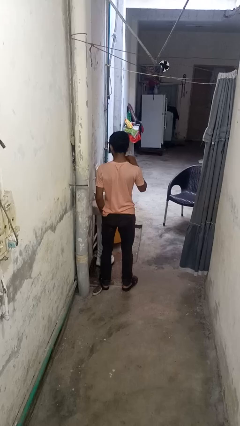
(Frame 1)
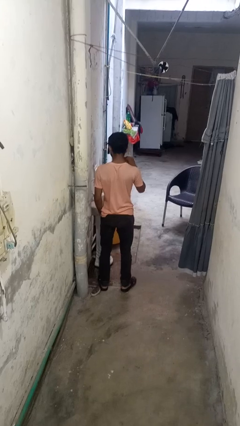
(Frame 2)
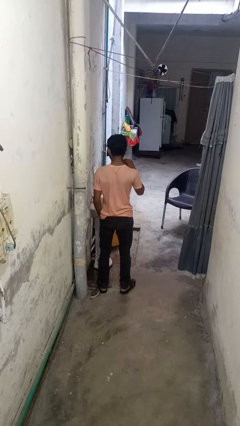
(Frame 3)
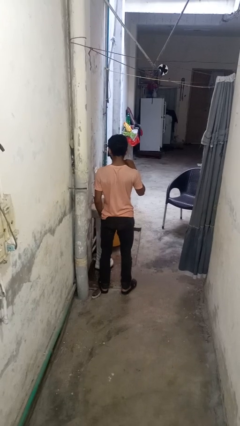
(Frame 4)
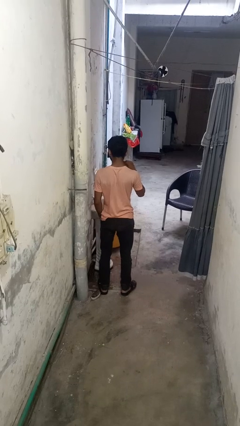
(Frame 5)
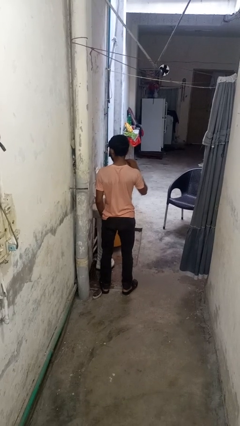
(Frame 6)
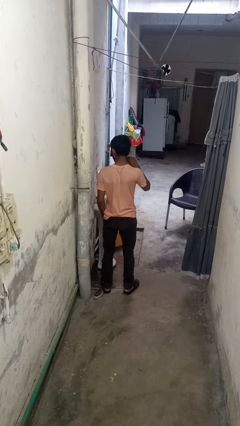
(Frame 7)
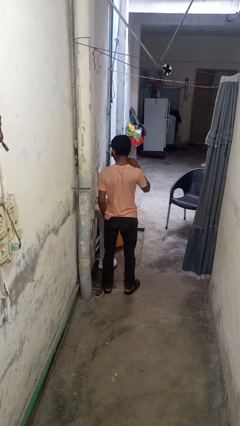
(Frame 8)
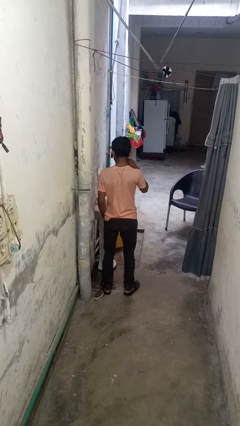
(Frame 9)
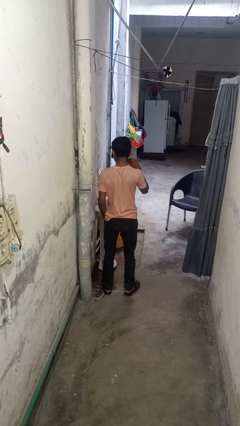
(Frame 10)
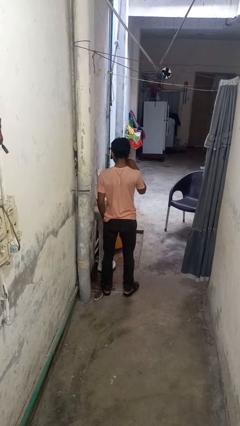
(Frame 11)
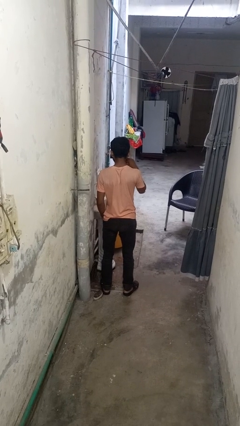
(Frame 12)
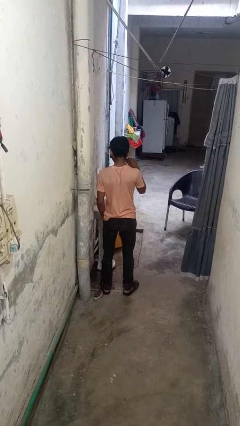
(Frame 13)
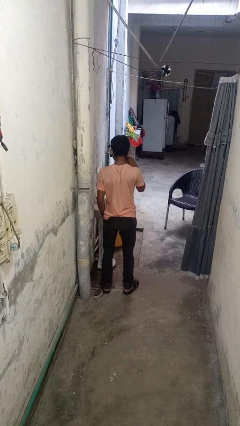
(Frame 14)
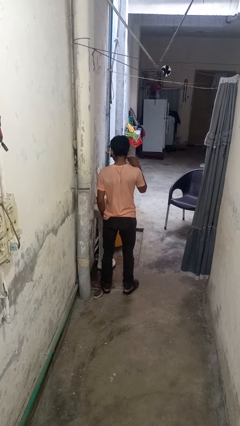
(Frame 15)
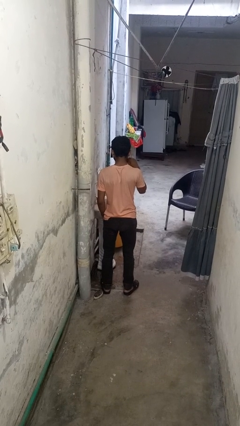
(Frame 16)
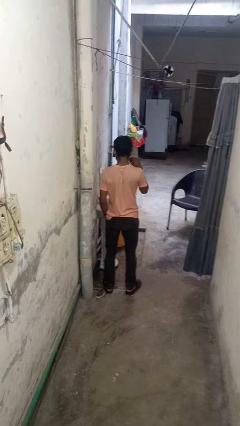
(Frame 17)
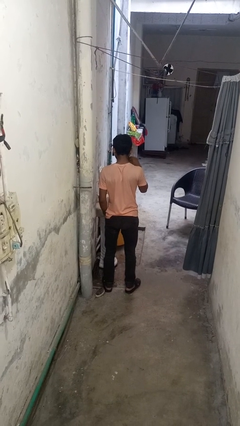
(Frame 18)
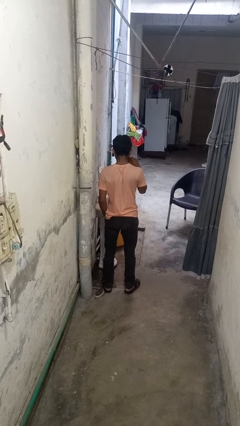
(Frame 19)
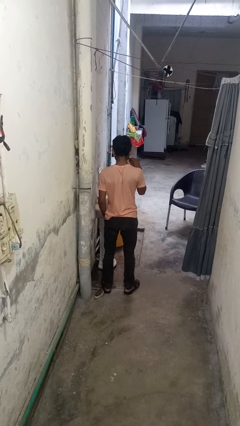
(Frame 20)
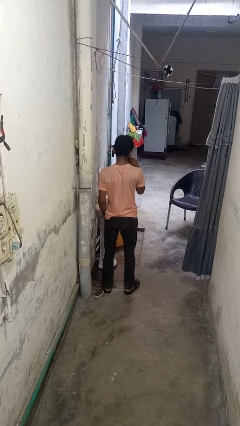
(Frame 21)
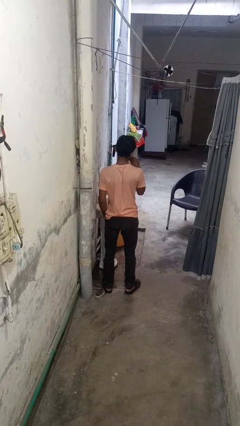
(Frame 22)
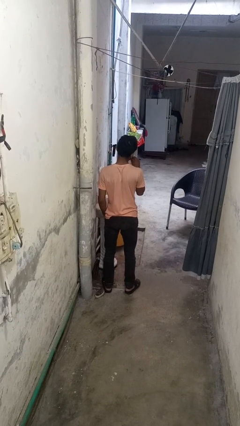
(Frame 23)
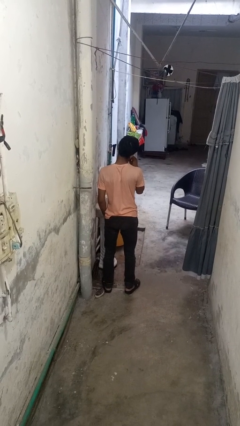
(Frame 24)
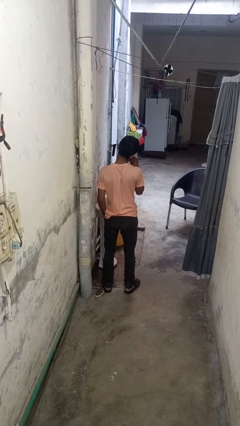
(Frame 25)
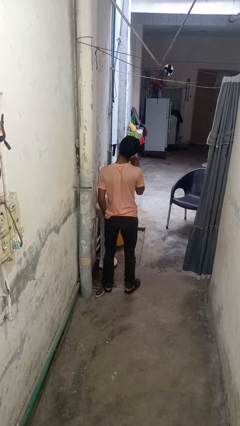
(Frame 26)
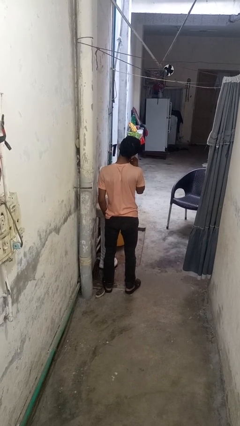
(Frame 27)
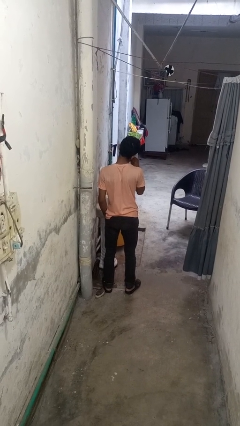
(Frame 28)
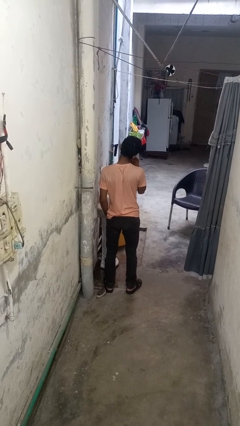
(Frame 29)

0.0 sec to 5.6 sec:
person brushes teeth

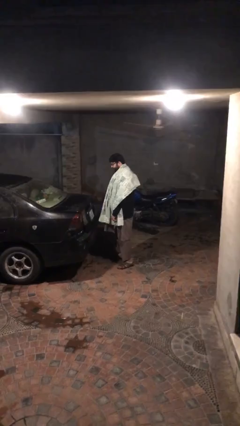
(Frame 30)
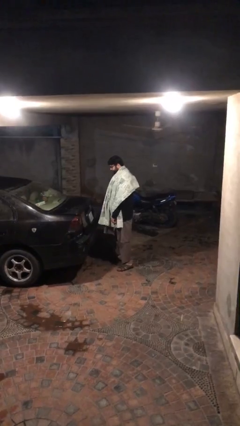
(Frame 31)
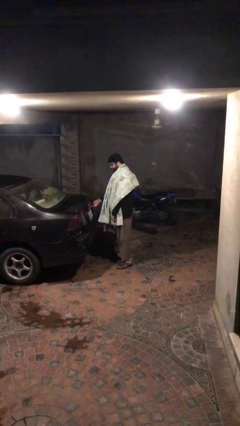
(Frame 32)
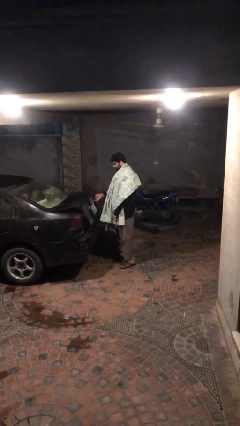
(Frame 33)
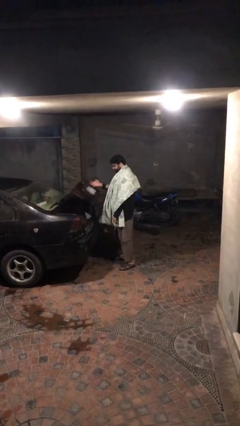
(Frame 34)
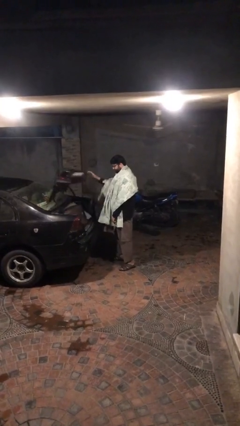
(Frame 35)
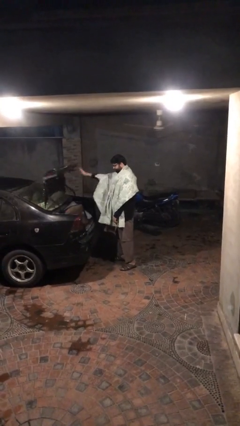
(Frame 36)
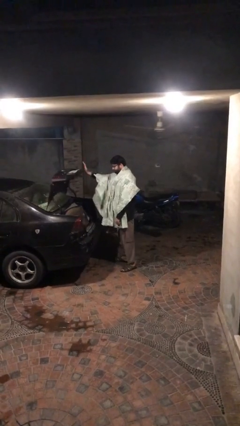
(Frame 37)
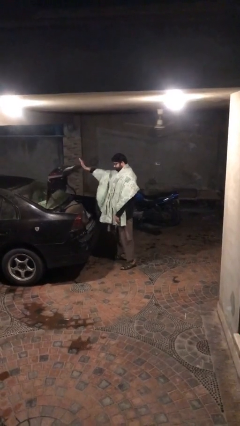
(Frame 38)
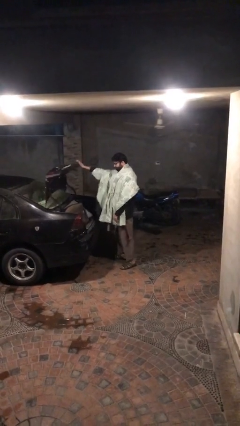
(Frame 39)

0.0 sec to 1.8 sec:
person opens car trunk

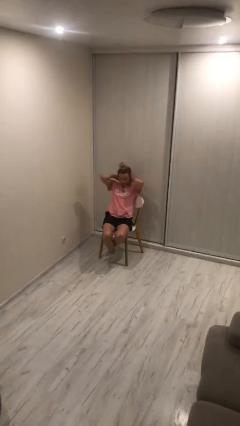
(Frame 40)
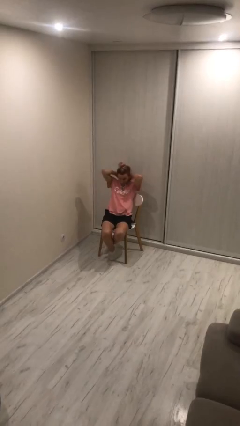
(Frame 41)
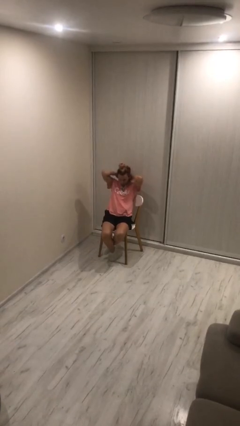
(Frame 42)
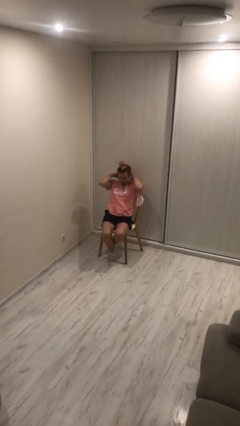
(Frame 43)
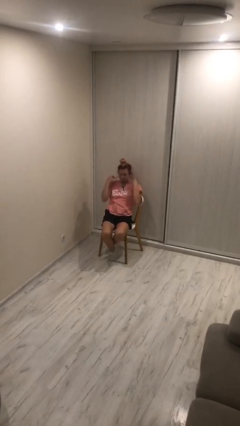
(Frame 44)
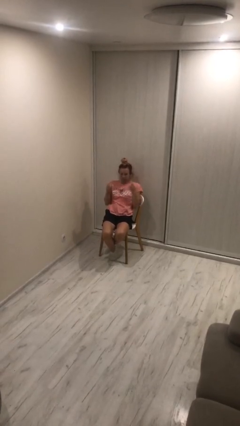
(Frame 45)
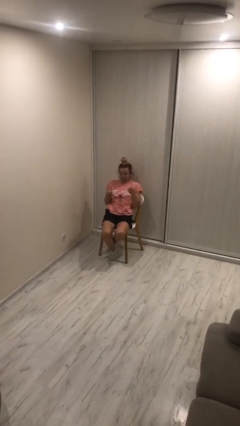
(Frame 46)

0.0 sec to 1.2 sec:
person takes off necklace

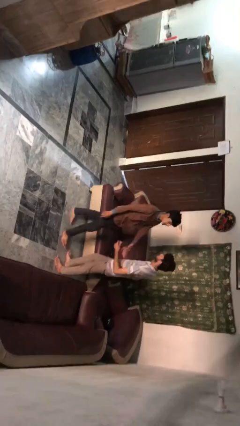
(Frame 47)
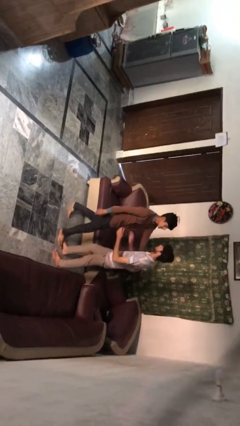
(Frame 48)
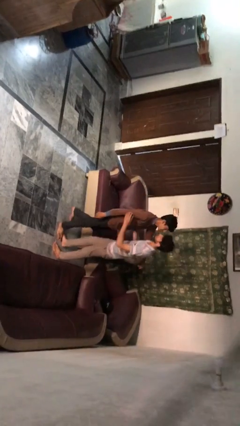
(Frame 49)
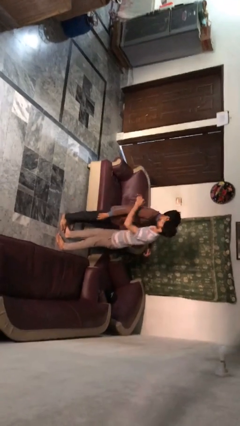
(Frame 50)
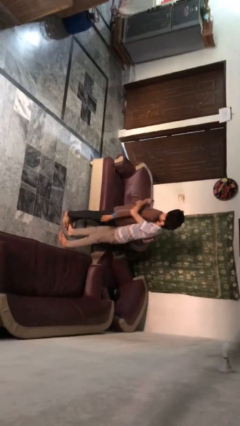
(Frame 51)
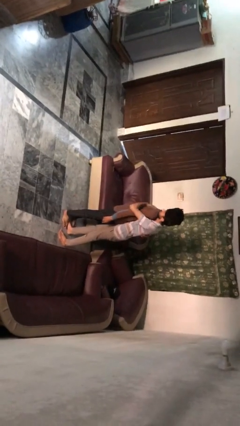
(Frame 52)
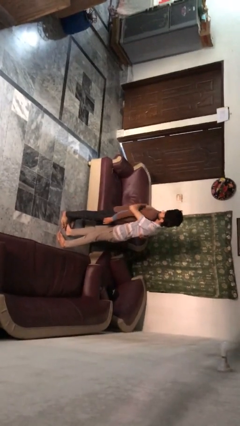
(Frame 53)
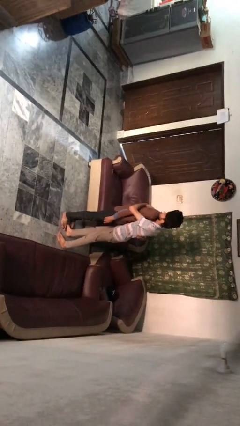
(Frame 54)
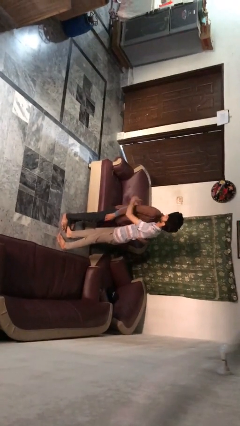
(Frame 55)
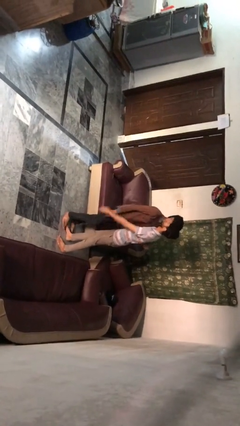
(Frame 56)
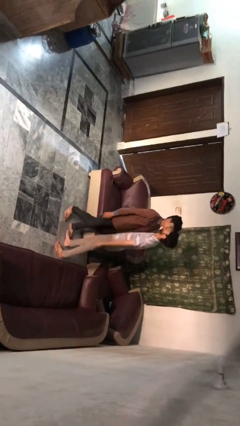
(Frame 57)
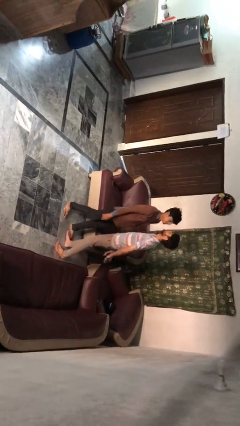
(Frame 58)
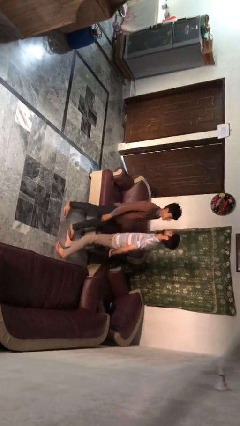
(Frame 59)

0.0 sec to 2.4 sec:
person embraces person

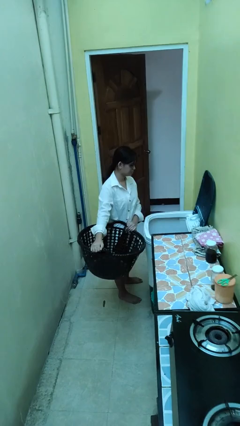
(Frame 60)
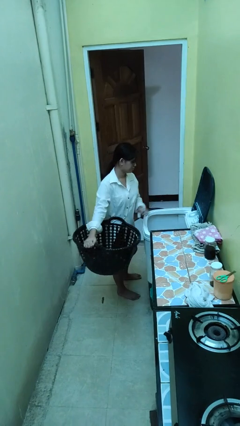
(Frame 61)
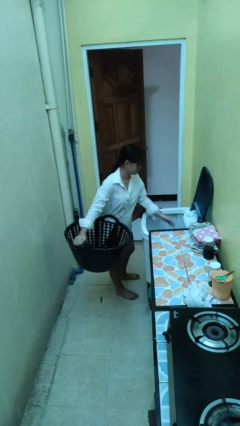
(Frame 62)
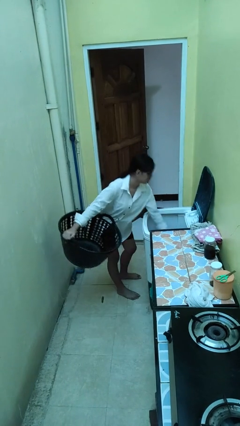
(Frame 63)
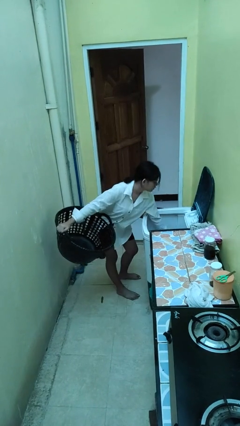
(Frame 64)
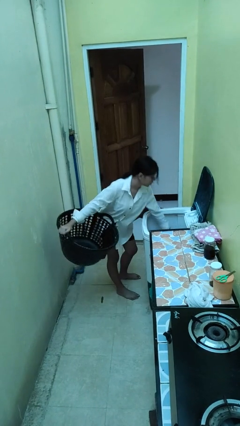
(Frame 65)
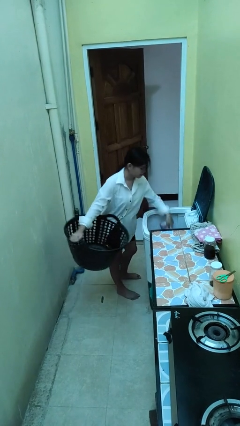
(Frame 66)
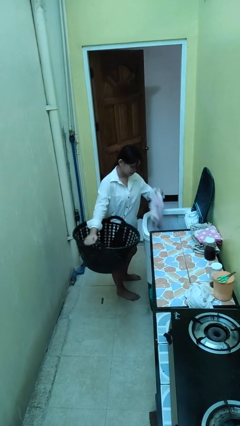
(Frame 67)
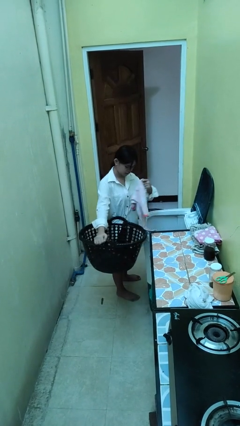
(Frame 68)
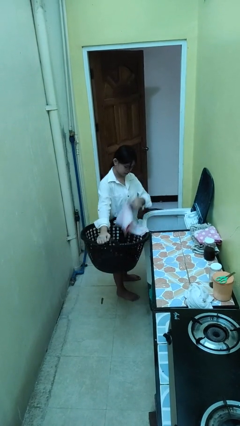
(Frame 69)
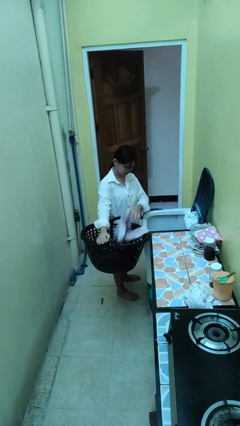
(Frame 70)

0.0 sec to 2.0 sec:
person loads clotheswasher

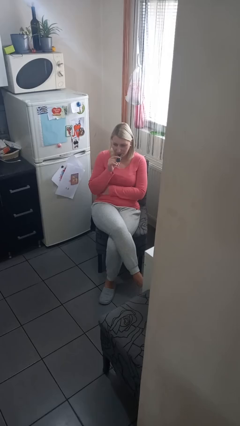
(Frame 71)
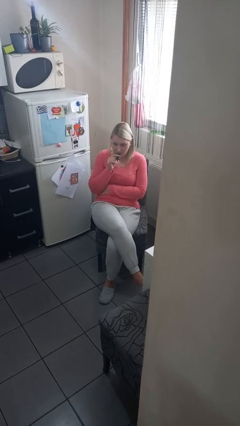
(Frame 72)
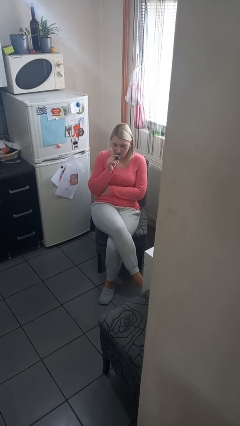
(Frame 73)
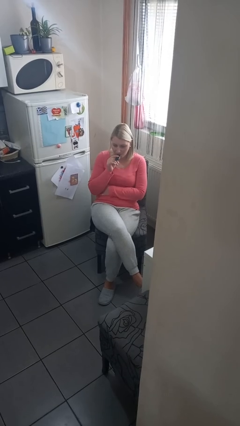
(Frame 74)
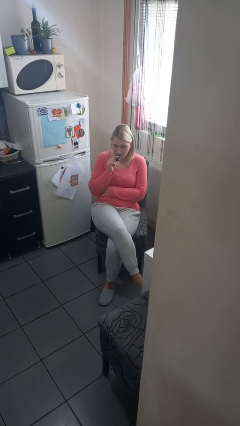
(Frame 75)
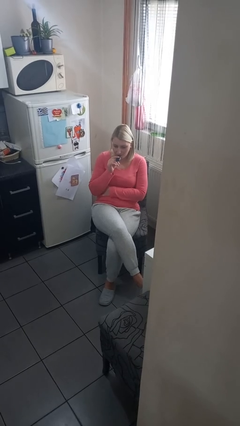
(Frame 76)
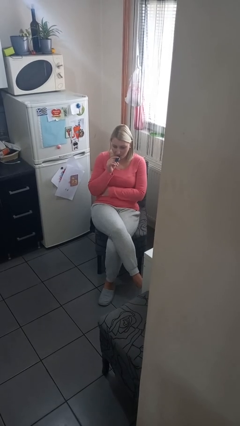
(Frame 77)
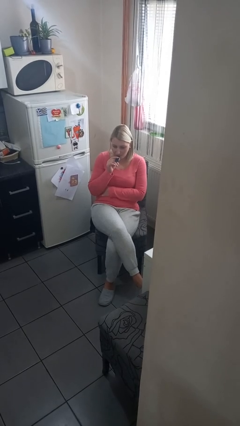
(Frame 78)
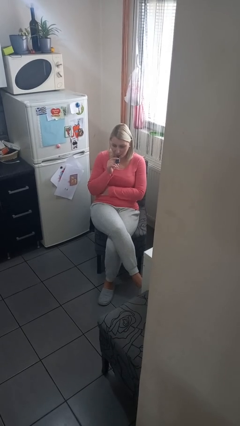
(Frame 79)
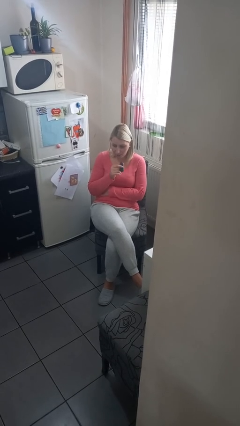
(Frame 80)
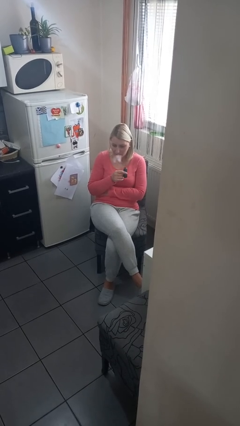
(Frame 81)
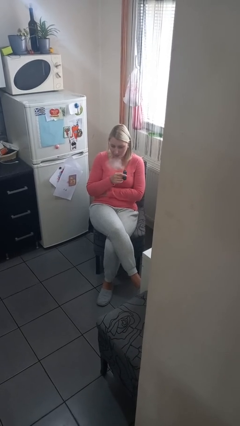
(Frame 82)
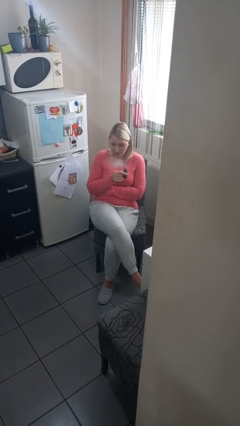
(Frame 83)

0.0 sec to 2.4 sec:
person vapes

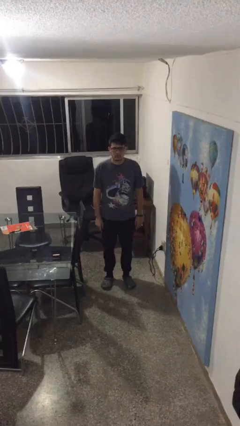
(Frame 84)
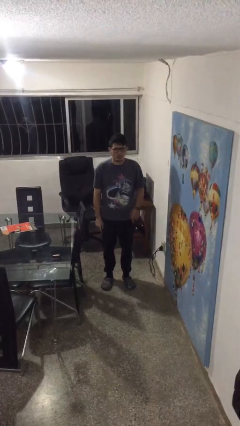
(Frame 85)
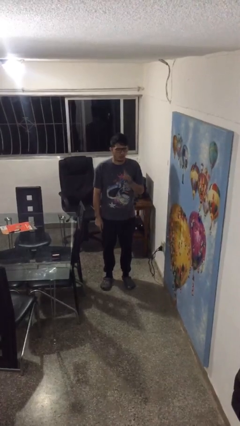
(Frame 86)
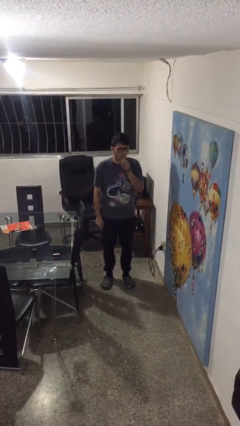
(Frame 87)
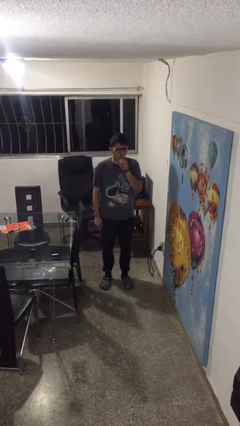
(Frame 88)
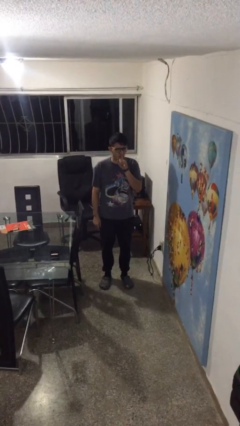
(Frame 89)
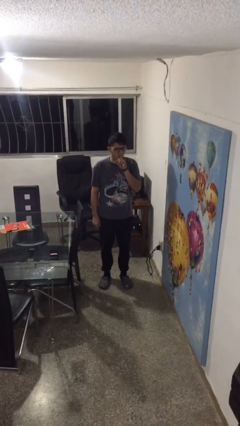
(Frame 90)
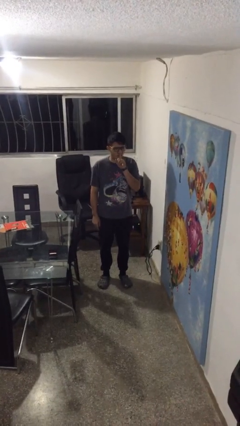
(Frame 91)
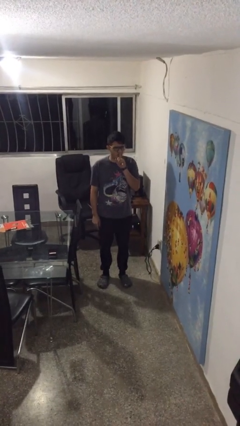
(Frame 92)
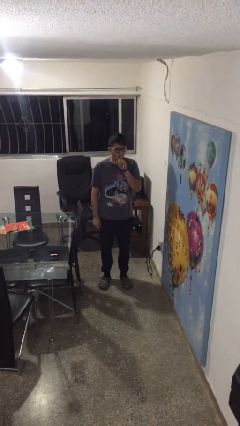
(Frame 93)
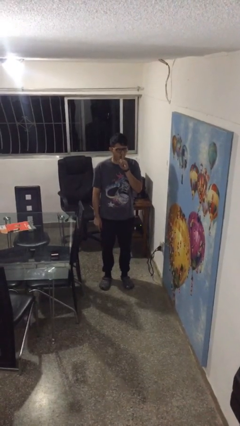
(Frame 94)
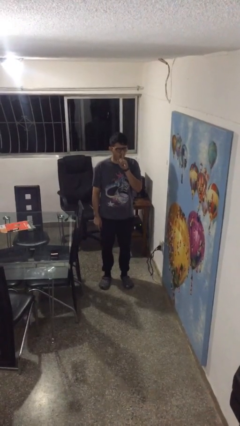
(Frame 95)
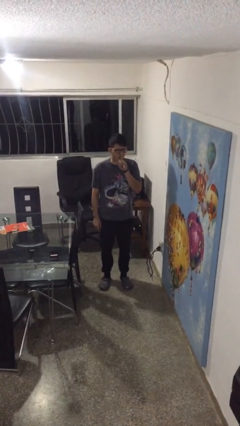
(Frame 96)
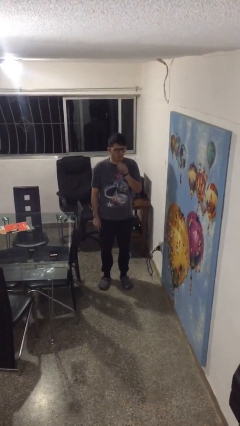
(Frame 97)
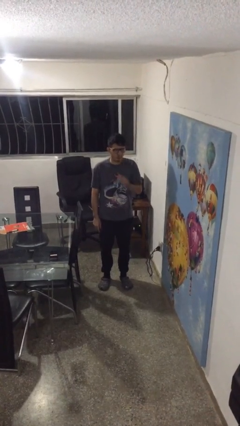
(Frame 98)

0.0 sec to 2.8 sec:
person gestures be quiet
